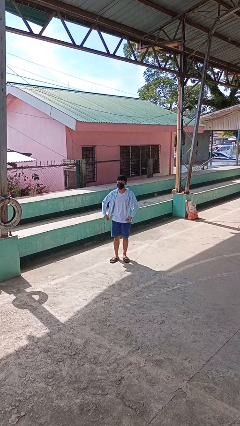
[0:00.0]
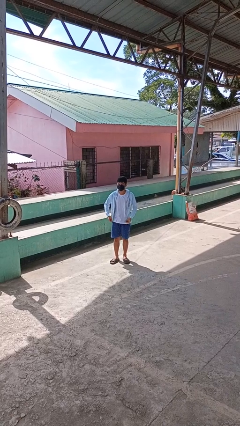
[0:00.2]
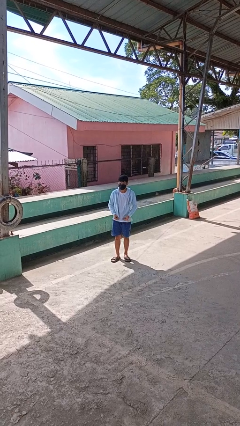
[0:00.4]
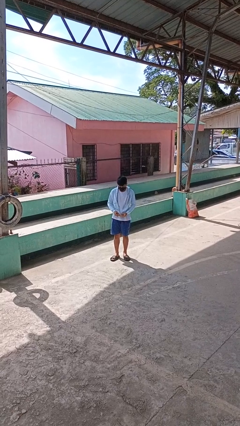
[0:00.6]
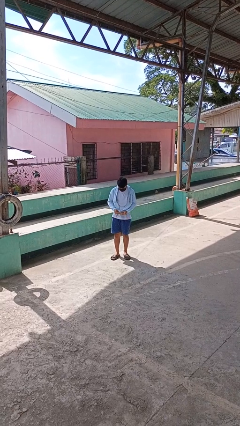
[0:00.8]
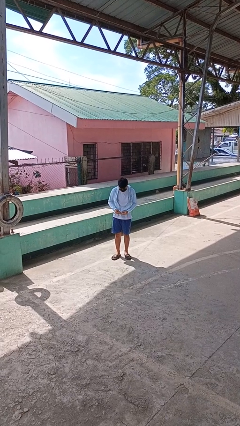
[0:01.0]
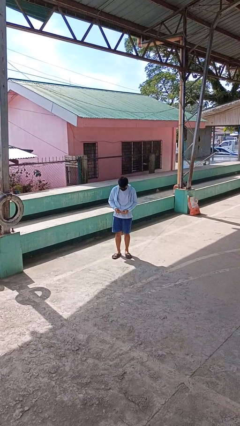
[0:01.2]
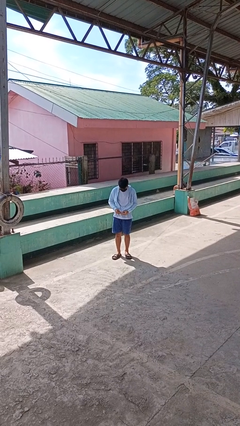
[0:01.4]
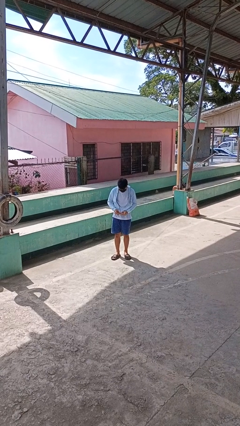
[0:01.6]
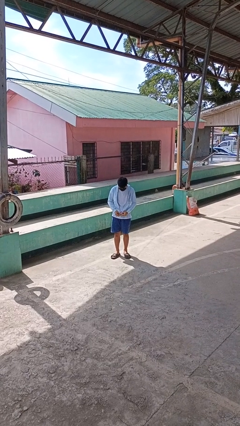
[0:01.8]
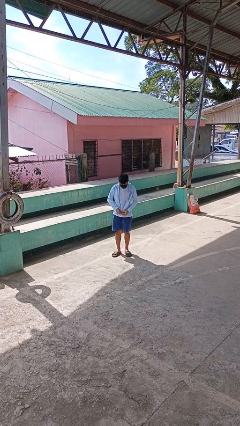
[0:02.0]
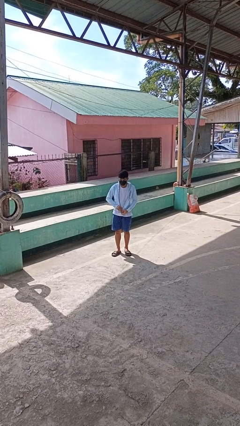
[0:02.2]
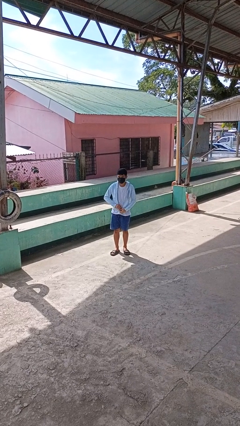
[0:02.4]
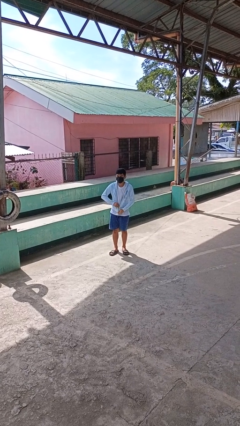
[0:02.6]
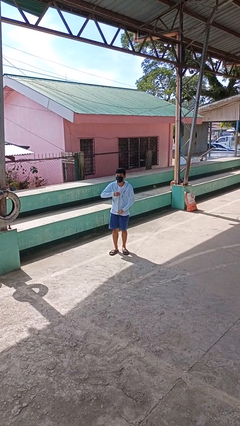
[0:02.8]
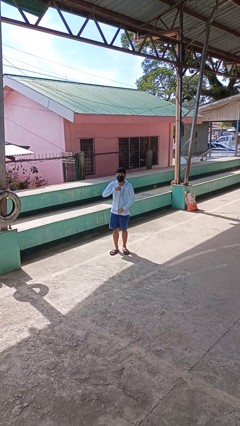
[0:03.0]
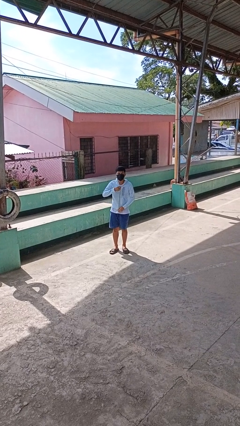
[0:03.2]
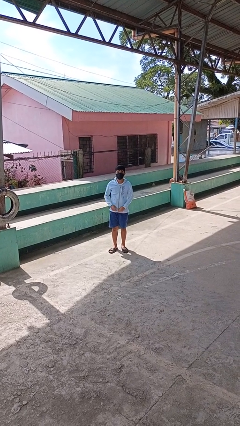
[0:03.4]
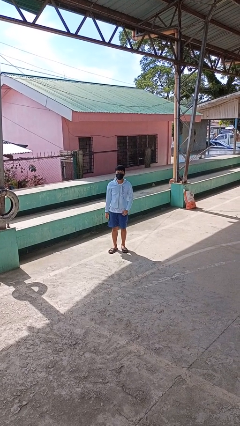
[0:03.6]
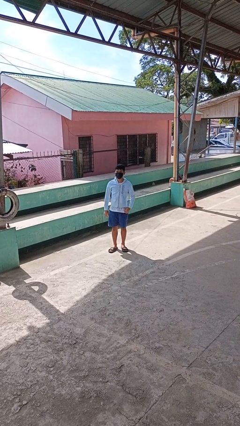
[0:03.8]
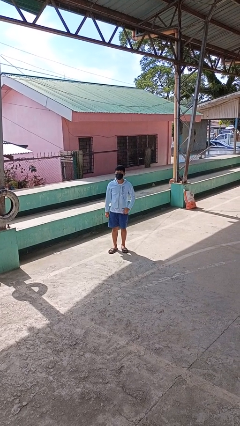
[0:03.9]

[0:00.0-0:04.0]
person zips up jacket

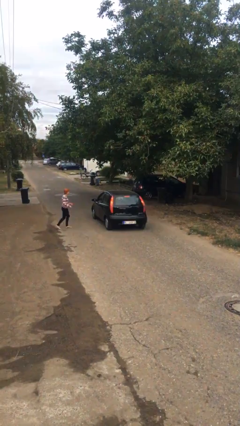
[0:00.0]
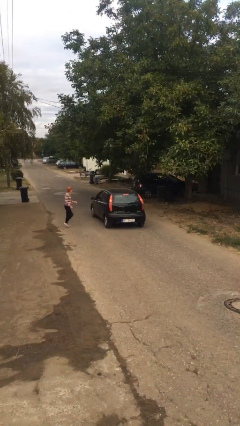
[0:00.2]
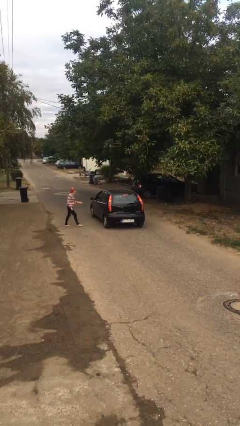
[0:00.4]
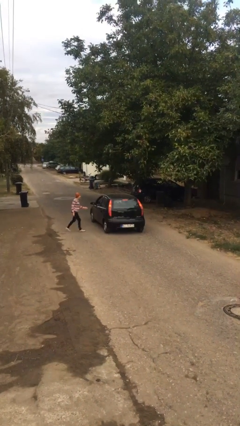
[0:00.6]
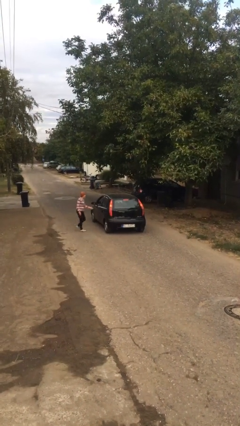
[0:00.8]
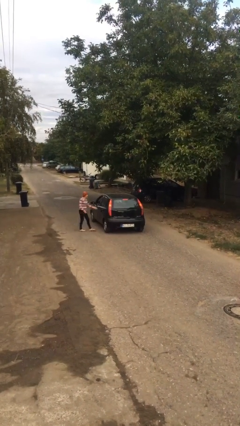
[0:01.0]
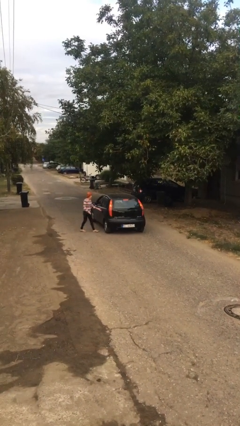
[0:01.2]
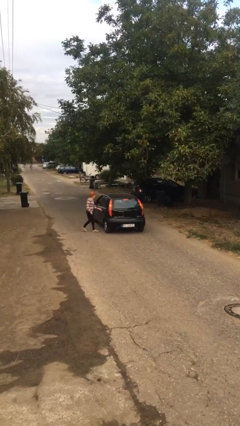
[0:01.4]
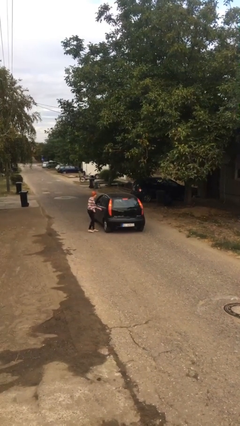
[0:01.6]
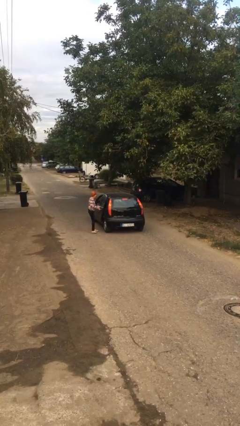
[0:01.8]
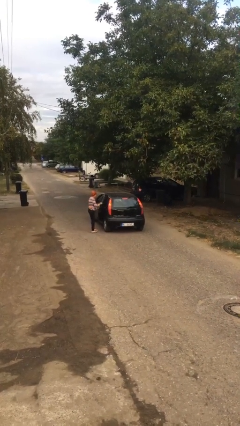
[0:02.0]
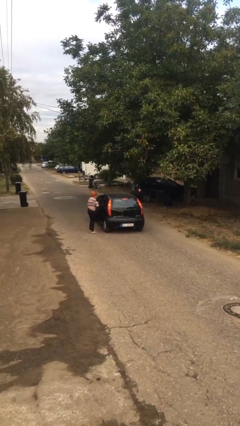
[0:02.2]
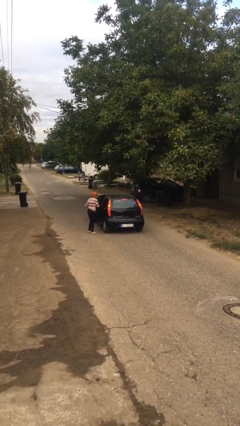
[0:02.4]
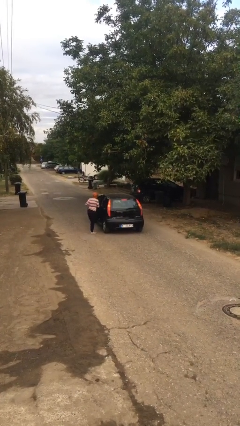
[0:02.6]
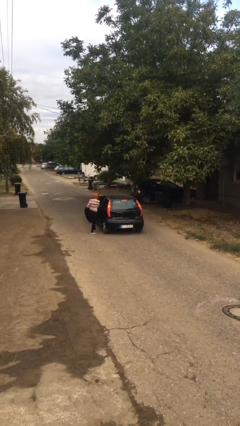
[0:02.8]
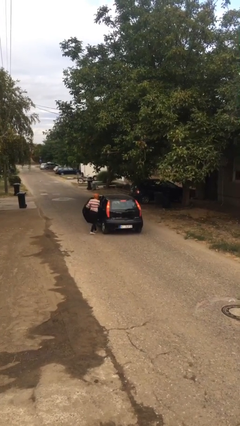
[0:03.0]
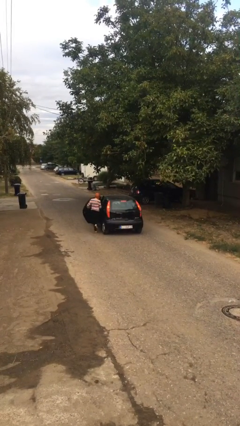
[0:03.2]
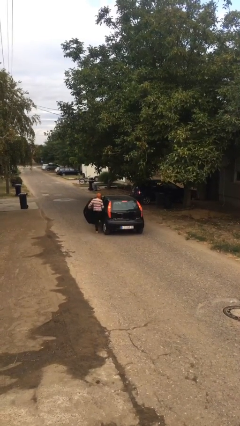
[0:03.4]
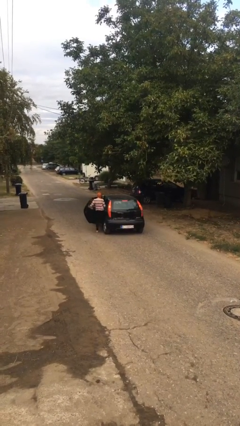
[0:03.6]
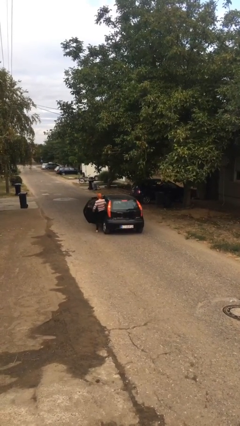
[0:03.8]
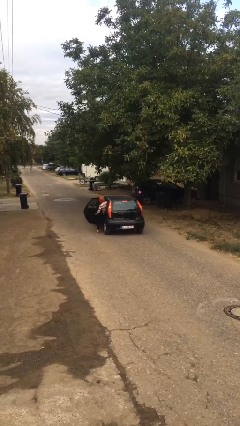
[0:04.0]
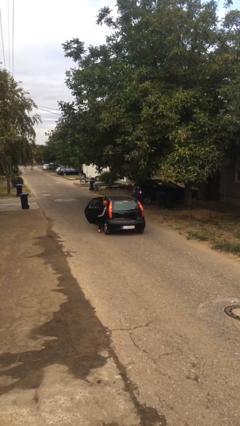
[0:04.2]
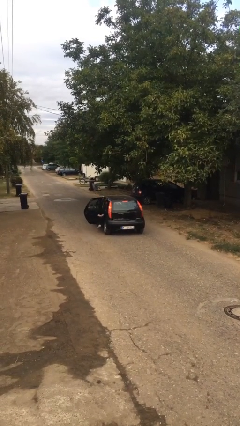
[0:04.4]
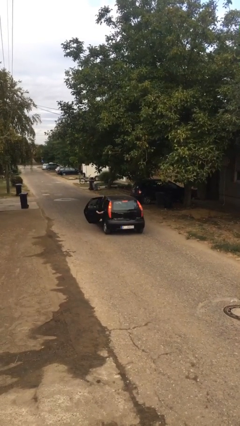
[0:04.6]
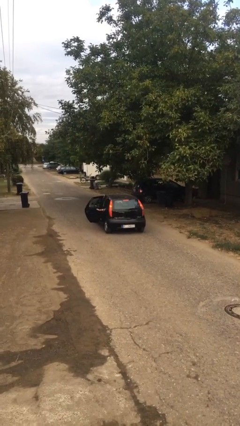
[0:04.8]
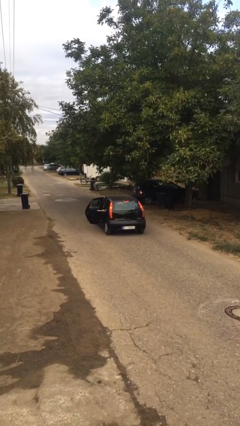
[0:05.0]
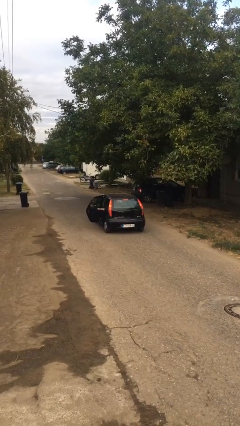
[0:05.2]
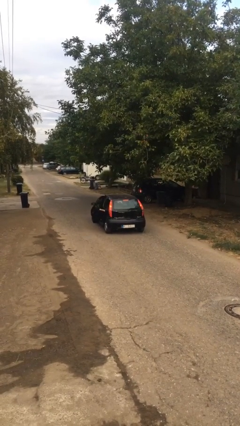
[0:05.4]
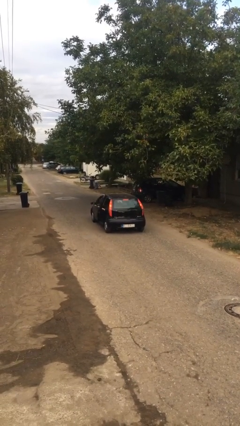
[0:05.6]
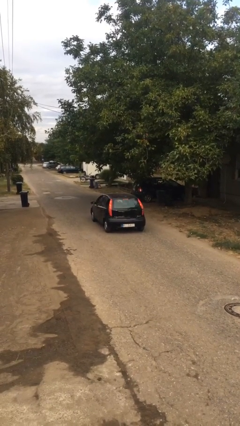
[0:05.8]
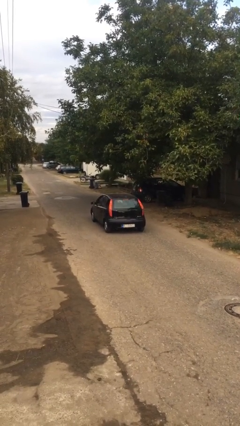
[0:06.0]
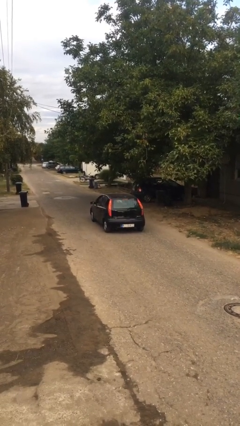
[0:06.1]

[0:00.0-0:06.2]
car picks up person

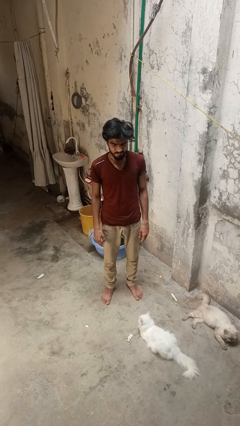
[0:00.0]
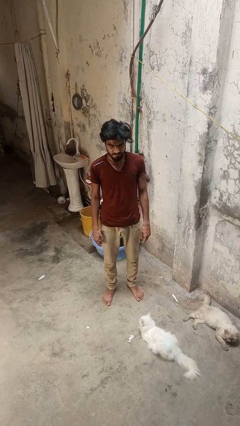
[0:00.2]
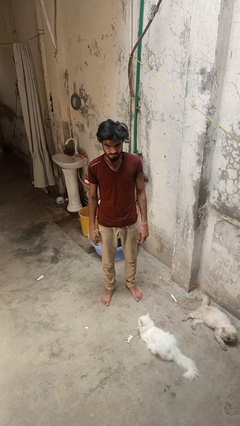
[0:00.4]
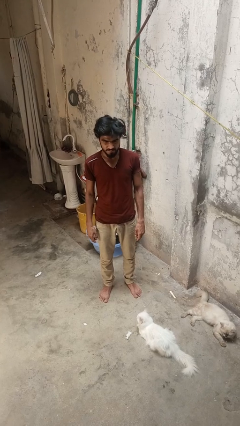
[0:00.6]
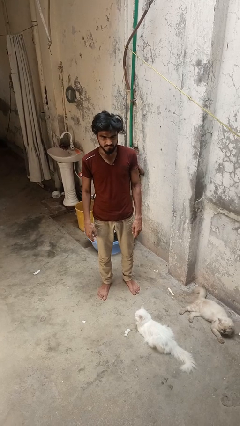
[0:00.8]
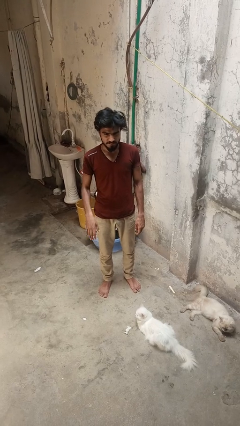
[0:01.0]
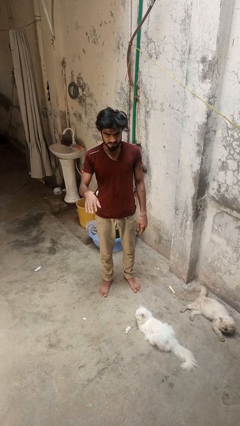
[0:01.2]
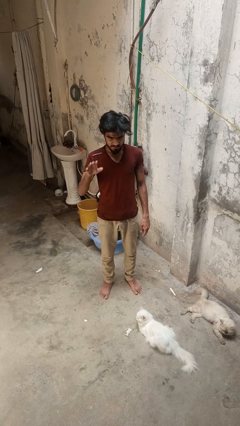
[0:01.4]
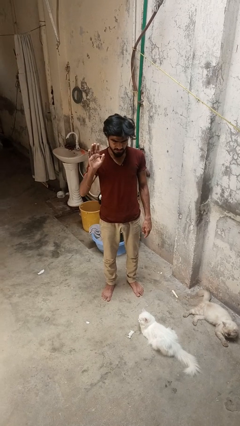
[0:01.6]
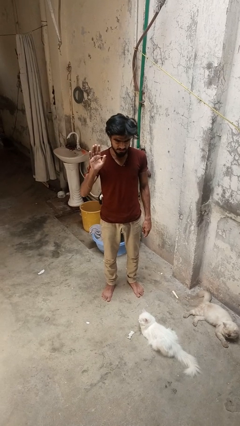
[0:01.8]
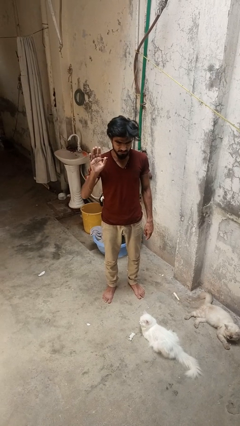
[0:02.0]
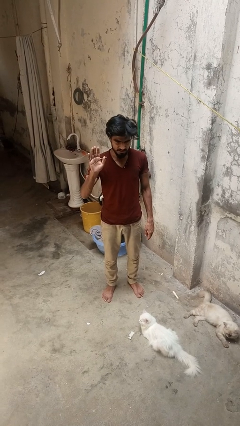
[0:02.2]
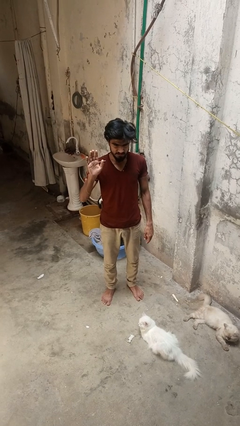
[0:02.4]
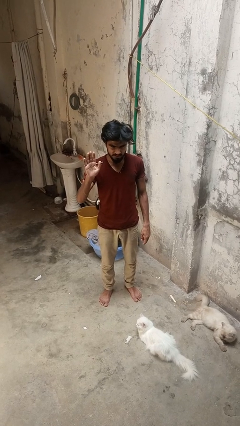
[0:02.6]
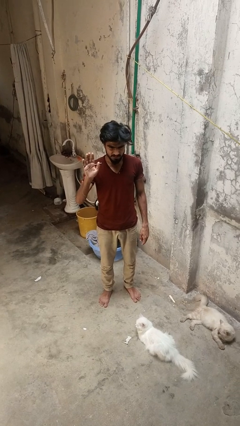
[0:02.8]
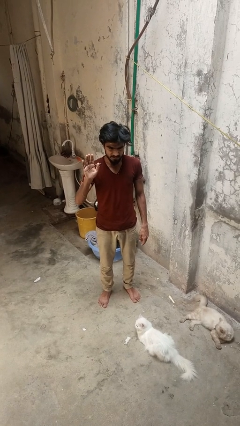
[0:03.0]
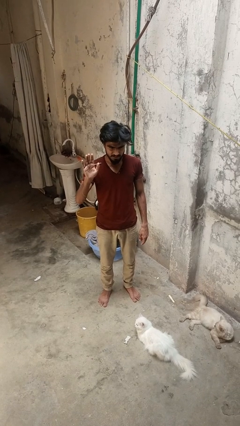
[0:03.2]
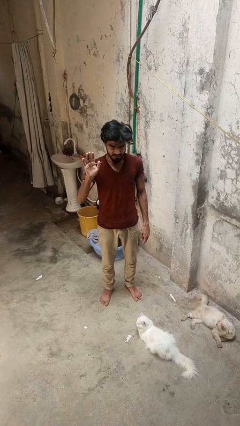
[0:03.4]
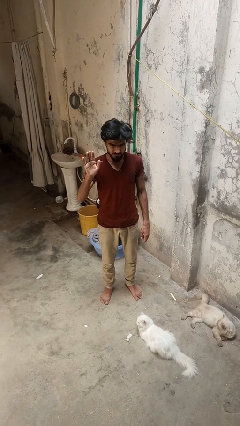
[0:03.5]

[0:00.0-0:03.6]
person gestures raise hand

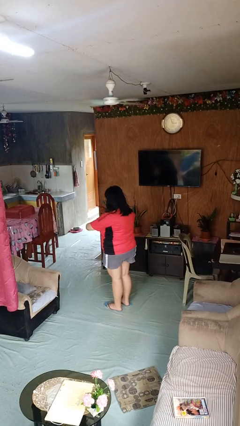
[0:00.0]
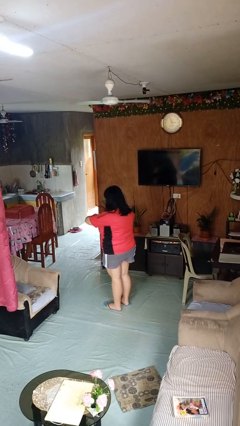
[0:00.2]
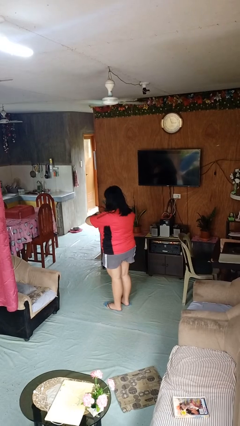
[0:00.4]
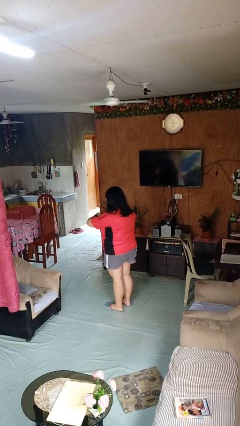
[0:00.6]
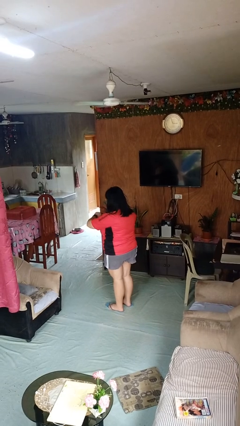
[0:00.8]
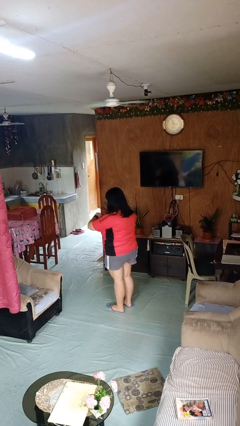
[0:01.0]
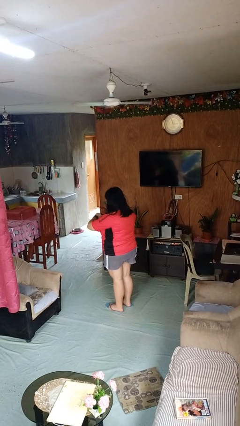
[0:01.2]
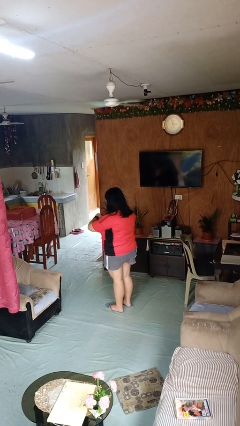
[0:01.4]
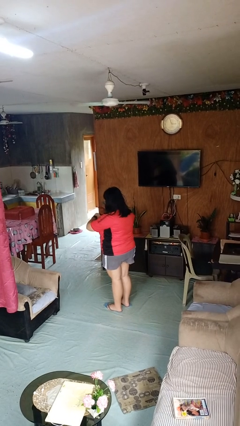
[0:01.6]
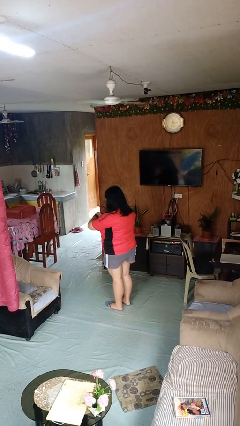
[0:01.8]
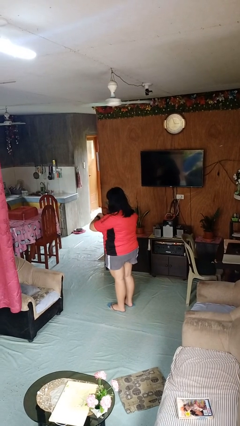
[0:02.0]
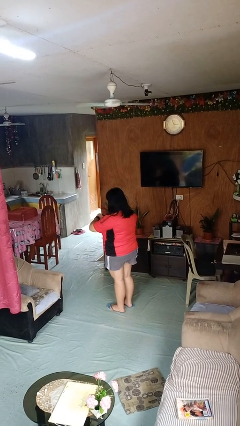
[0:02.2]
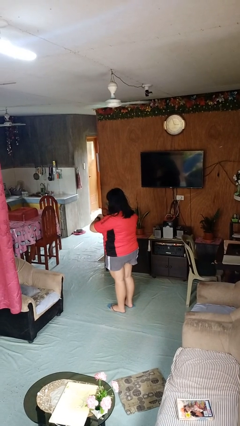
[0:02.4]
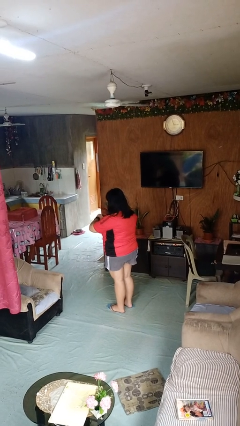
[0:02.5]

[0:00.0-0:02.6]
person looks at wristwatch

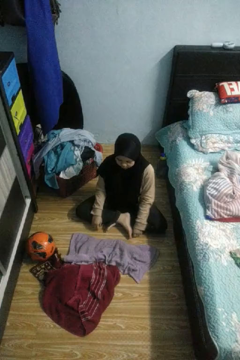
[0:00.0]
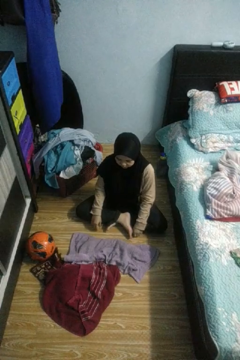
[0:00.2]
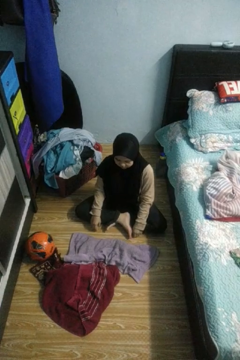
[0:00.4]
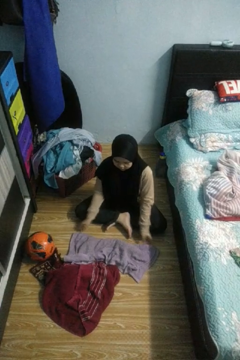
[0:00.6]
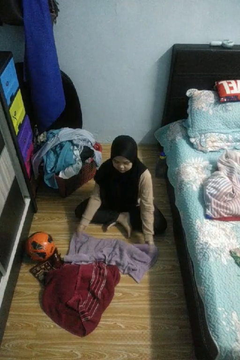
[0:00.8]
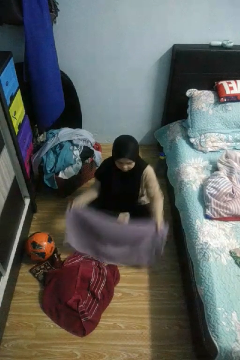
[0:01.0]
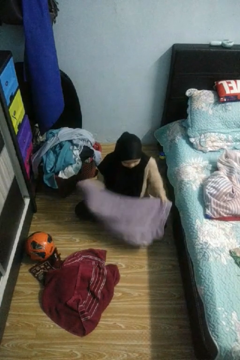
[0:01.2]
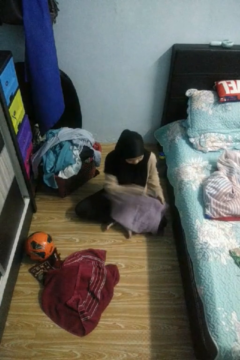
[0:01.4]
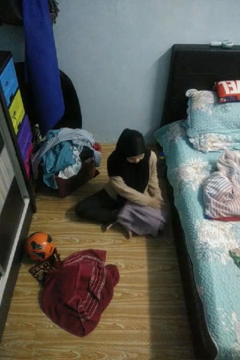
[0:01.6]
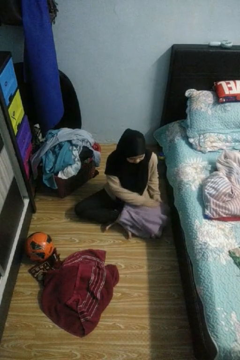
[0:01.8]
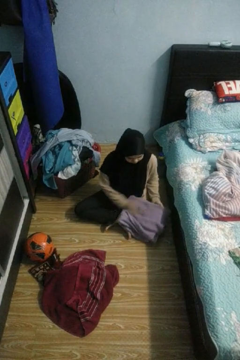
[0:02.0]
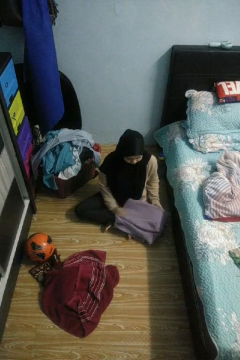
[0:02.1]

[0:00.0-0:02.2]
person folds towel
